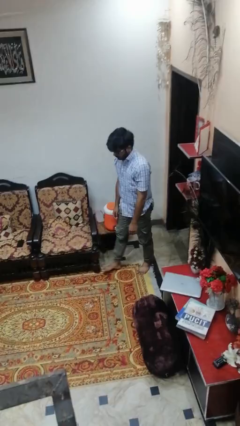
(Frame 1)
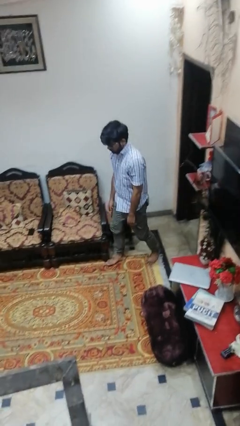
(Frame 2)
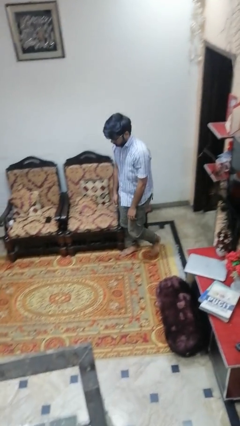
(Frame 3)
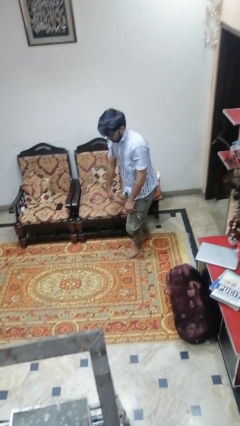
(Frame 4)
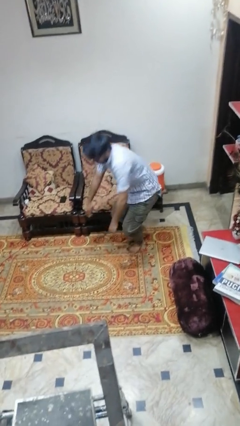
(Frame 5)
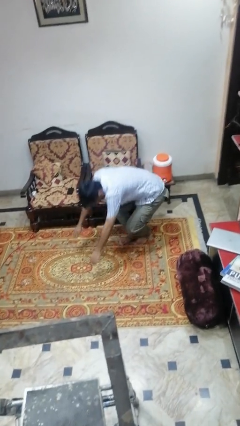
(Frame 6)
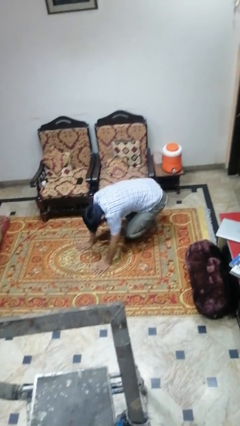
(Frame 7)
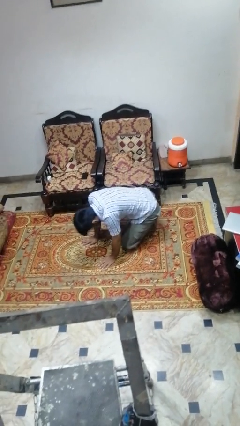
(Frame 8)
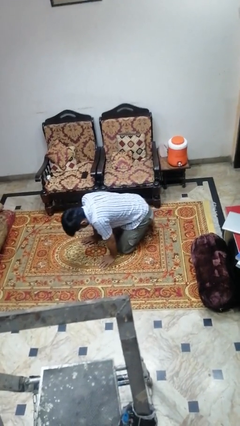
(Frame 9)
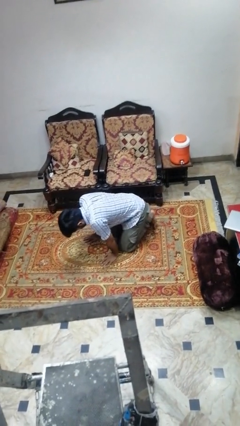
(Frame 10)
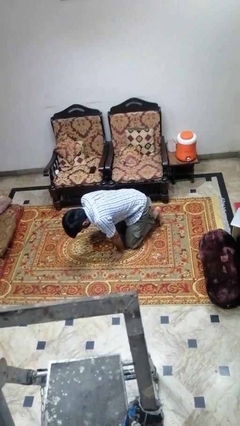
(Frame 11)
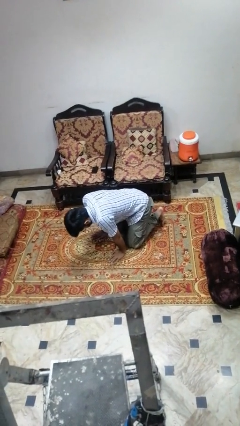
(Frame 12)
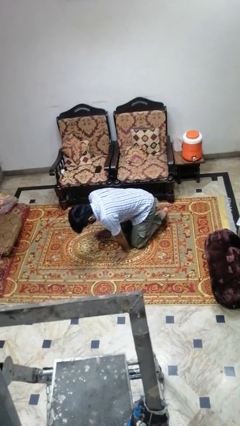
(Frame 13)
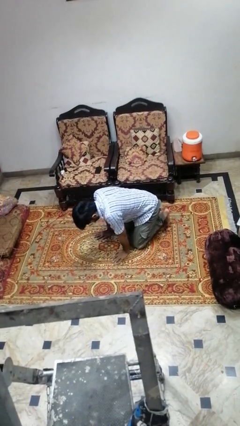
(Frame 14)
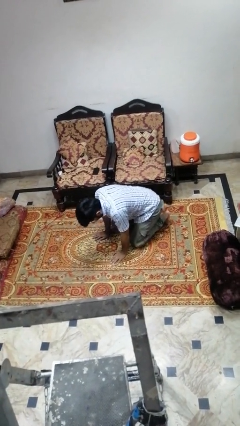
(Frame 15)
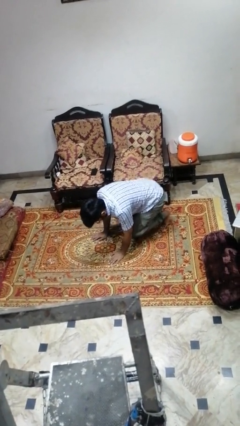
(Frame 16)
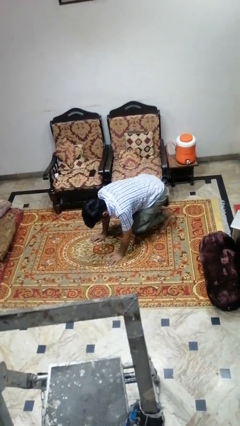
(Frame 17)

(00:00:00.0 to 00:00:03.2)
person trips on object on floor

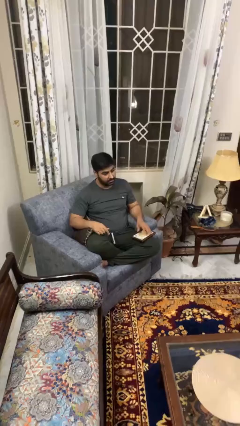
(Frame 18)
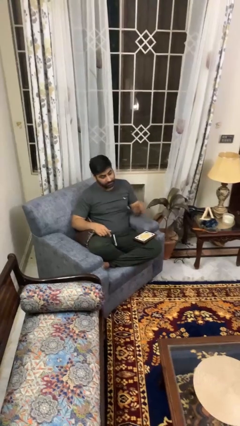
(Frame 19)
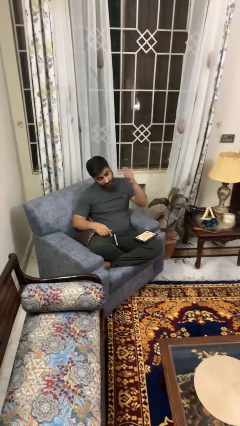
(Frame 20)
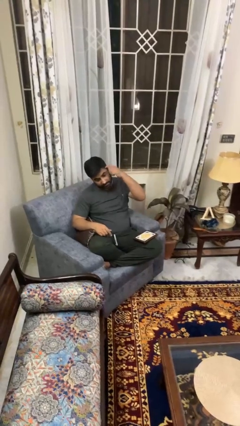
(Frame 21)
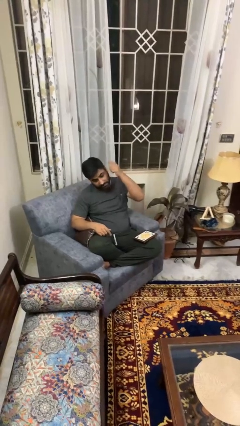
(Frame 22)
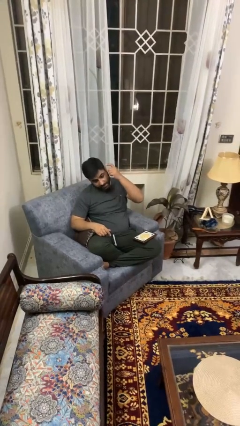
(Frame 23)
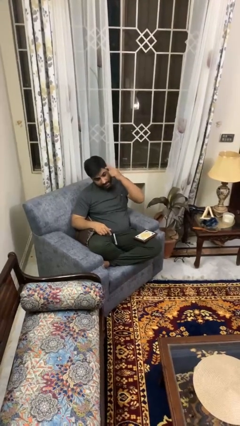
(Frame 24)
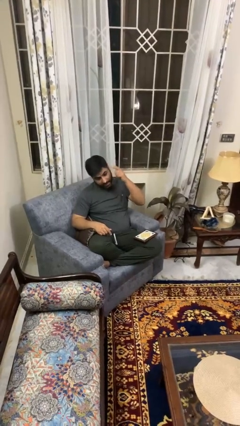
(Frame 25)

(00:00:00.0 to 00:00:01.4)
person pats head

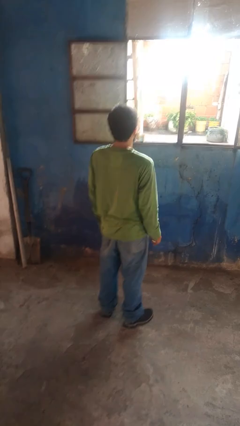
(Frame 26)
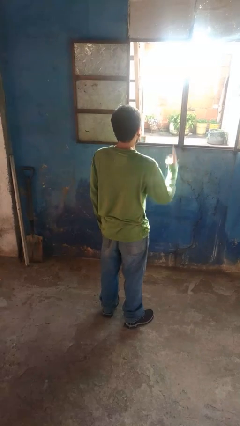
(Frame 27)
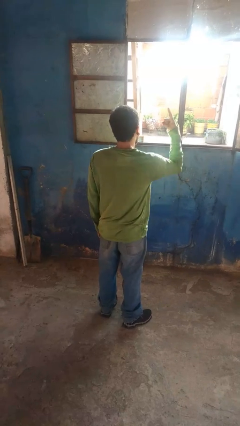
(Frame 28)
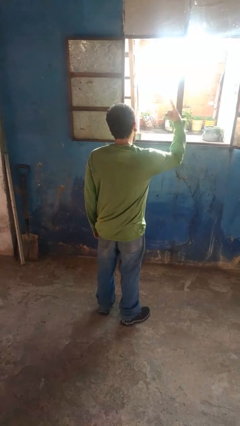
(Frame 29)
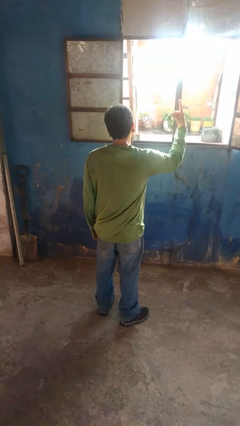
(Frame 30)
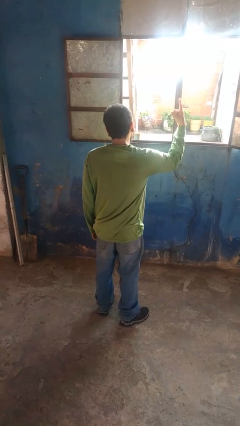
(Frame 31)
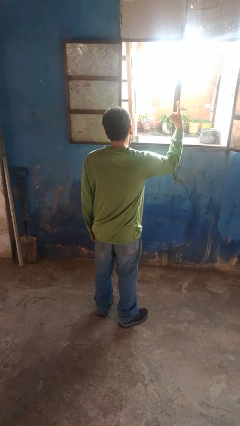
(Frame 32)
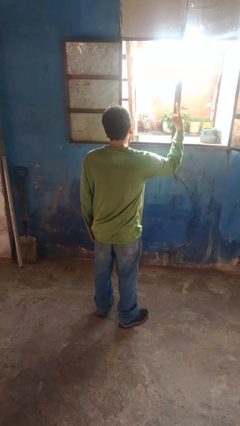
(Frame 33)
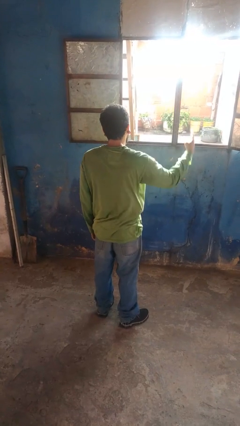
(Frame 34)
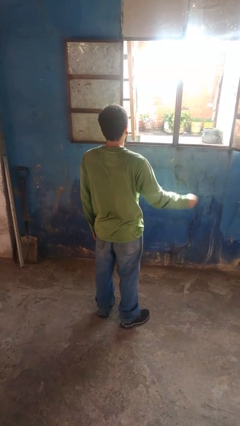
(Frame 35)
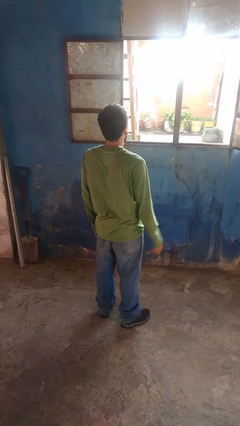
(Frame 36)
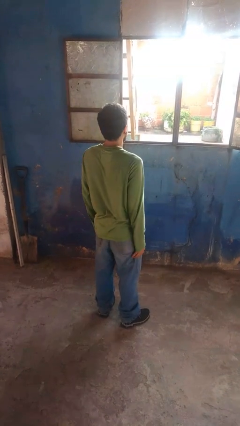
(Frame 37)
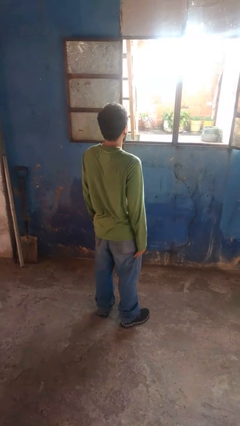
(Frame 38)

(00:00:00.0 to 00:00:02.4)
person gestures number one

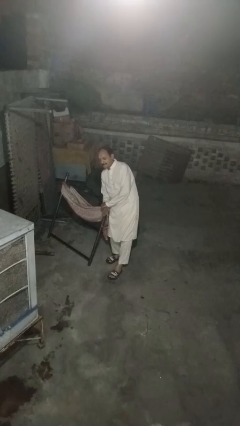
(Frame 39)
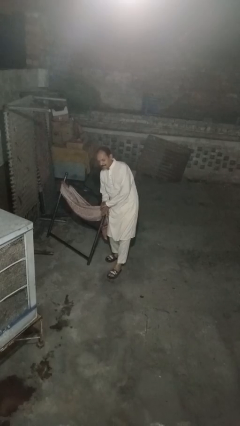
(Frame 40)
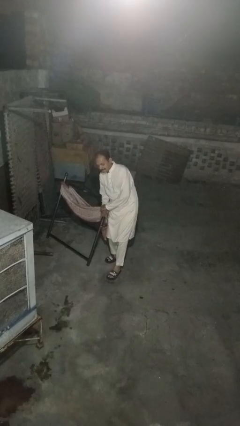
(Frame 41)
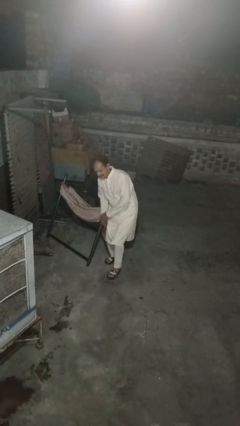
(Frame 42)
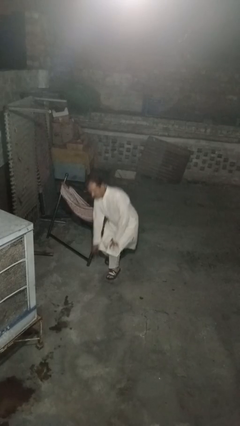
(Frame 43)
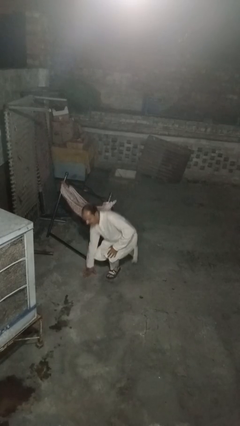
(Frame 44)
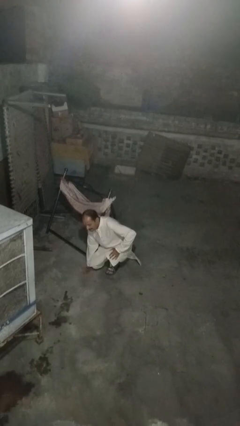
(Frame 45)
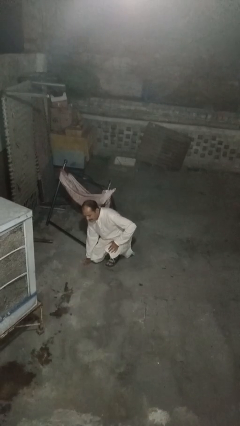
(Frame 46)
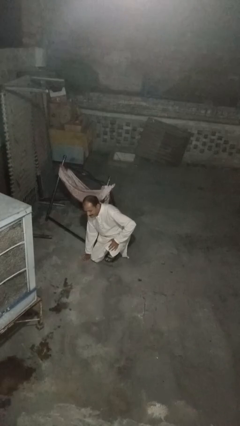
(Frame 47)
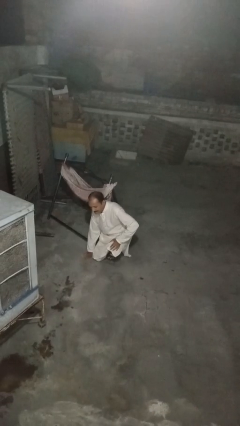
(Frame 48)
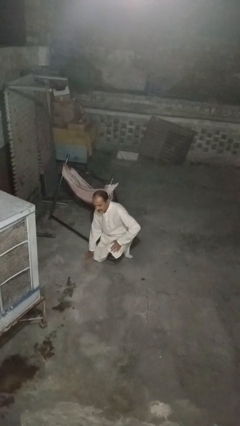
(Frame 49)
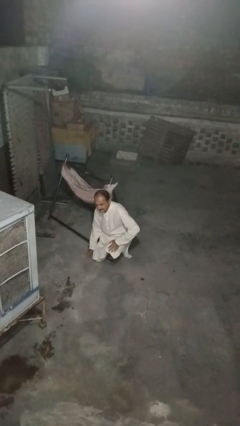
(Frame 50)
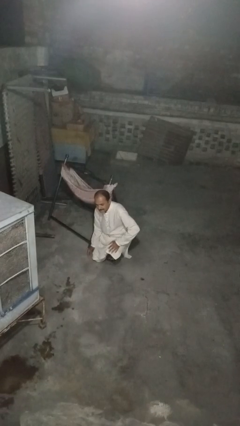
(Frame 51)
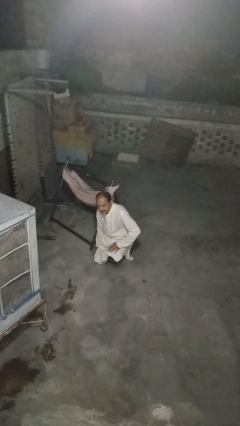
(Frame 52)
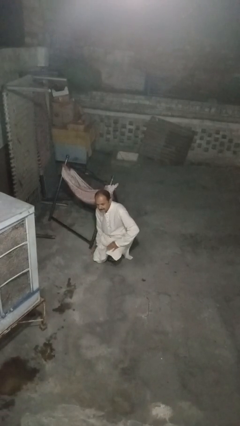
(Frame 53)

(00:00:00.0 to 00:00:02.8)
person falls while standing

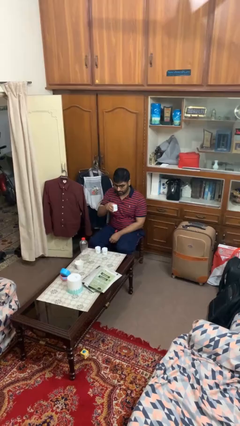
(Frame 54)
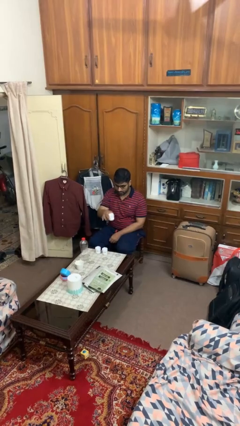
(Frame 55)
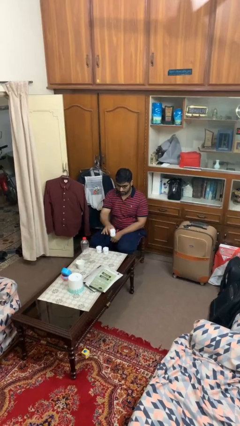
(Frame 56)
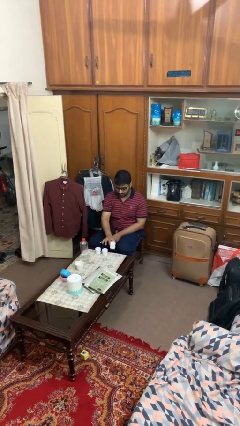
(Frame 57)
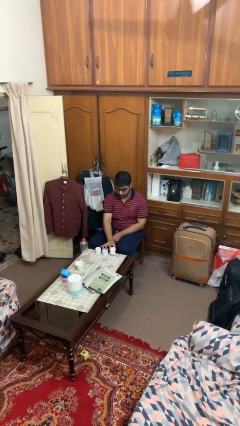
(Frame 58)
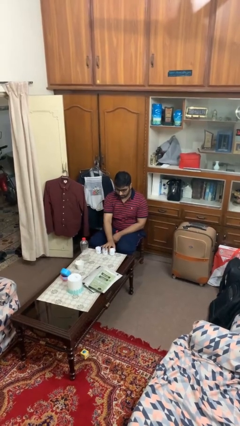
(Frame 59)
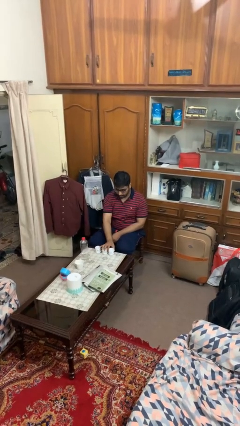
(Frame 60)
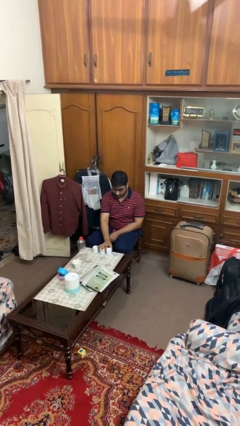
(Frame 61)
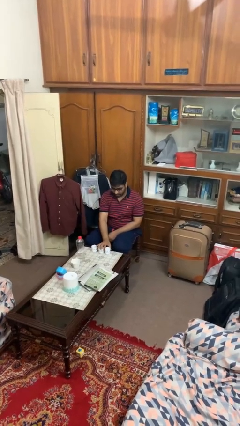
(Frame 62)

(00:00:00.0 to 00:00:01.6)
person puts down object on table

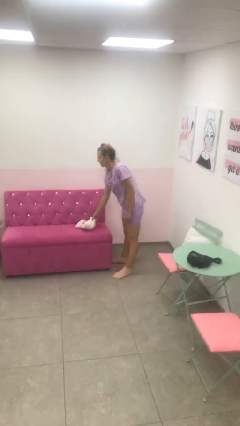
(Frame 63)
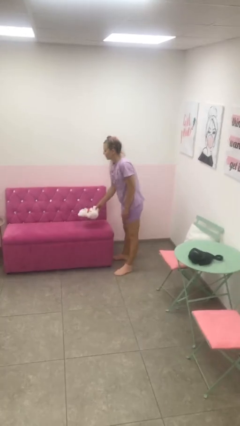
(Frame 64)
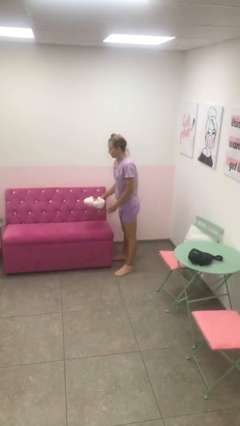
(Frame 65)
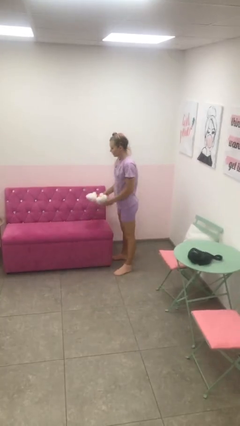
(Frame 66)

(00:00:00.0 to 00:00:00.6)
person picks up object from couch

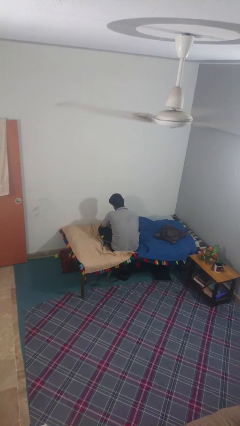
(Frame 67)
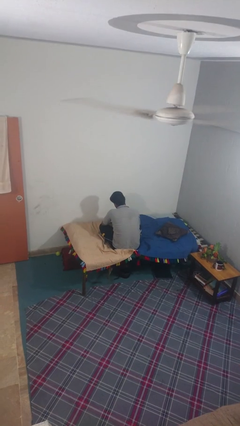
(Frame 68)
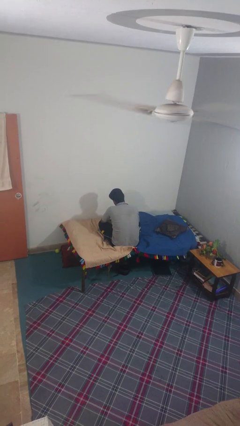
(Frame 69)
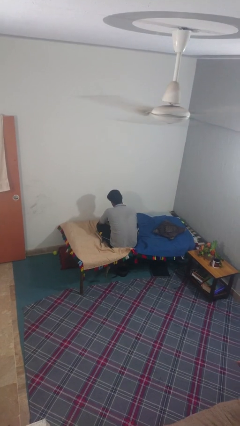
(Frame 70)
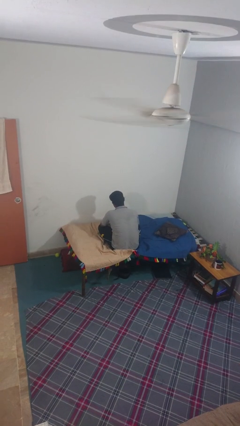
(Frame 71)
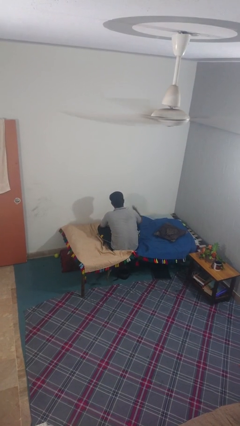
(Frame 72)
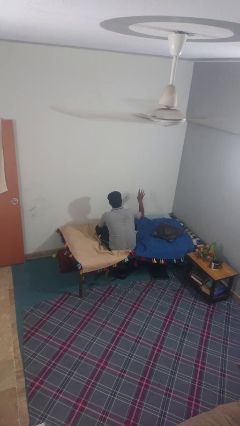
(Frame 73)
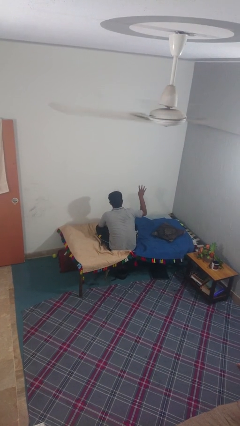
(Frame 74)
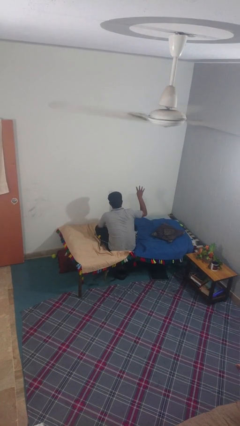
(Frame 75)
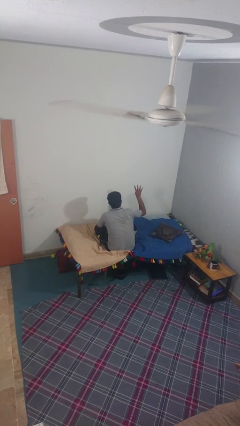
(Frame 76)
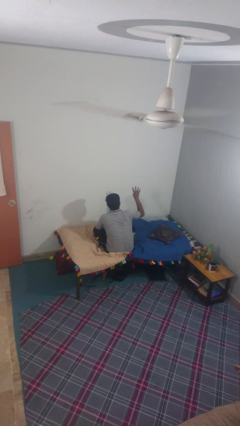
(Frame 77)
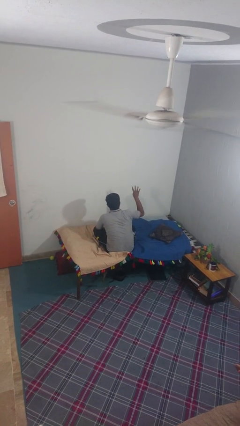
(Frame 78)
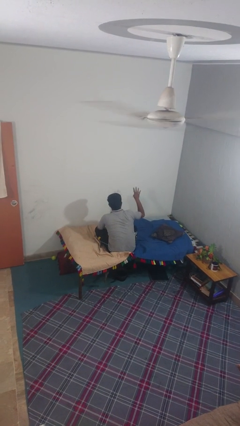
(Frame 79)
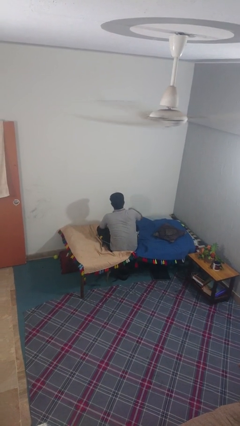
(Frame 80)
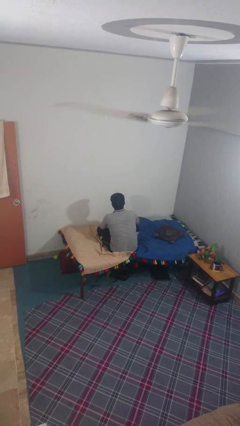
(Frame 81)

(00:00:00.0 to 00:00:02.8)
person gestures number four

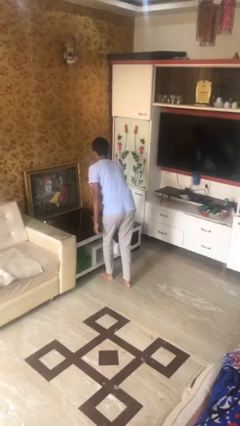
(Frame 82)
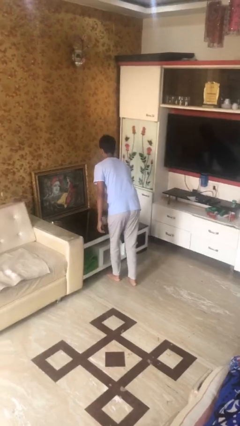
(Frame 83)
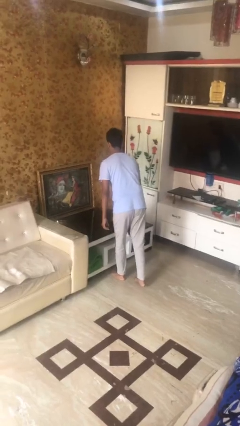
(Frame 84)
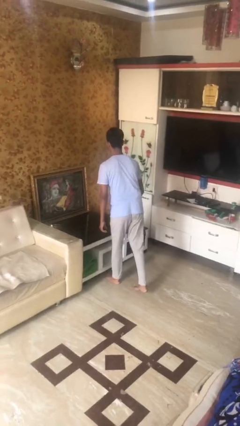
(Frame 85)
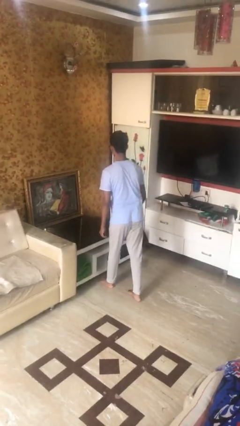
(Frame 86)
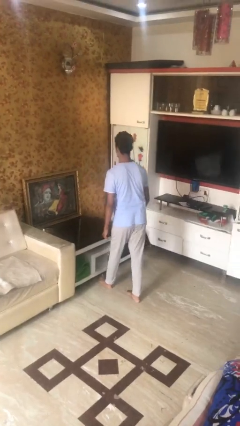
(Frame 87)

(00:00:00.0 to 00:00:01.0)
person picks up object from table

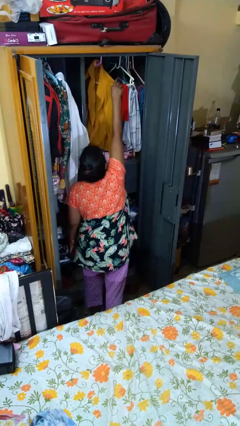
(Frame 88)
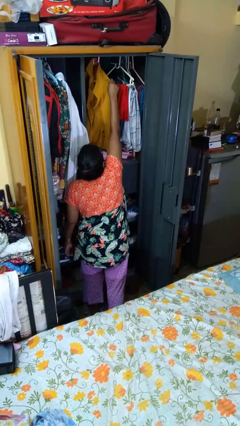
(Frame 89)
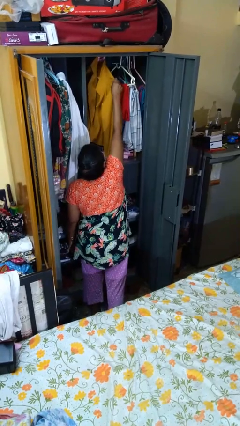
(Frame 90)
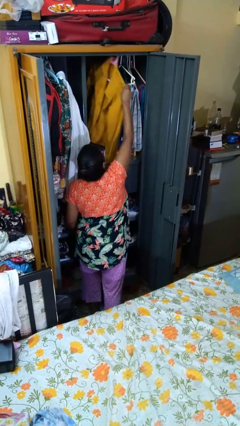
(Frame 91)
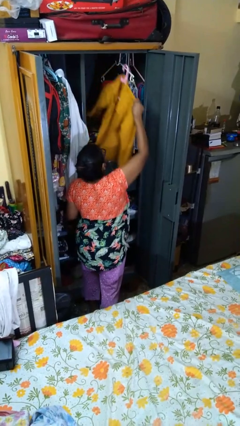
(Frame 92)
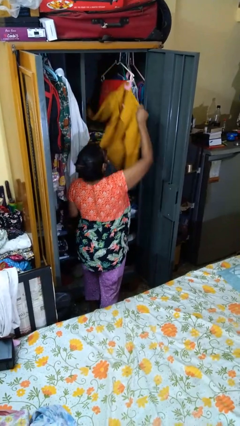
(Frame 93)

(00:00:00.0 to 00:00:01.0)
person takes clothes from closet
